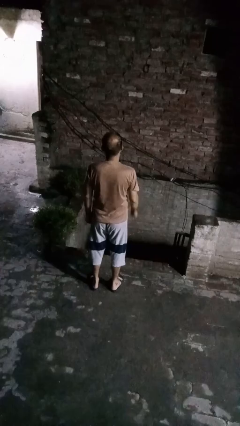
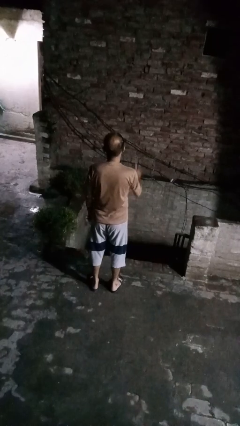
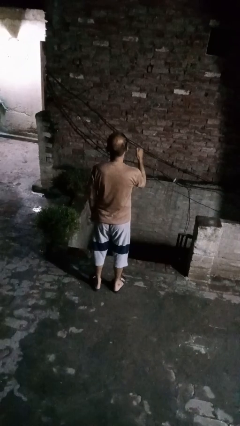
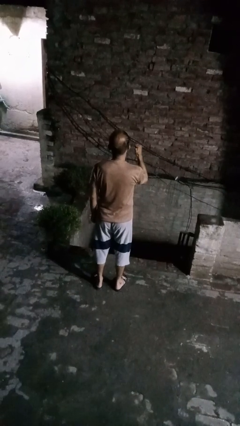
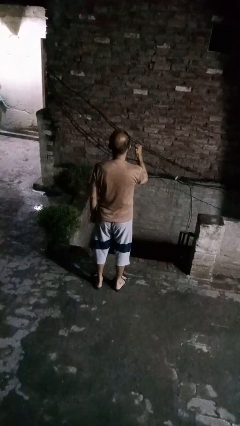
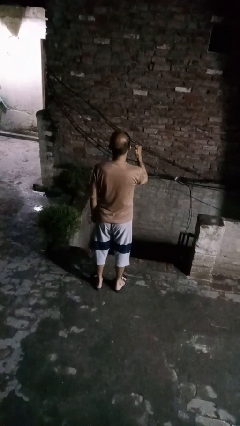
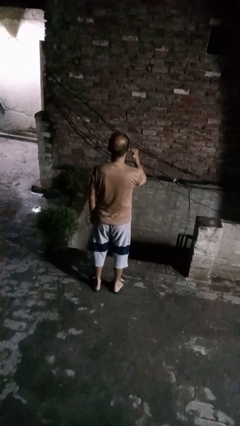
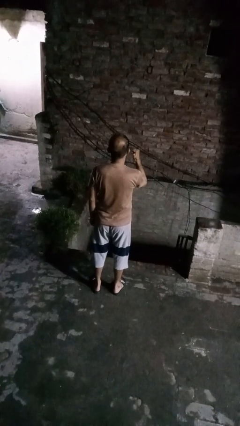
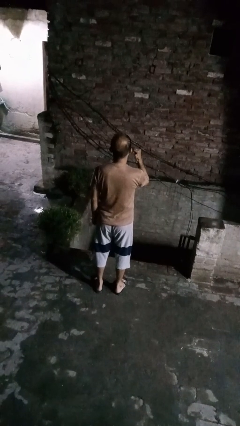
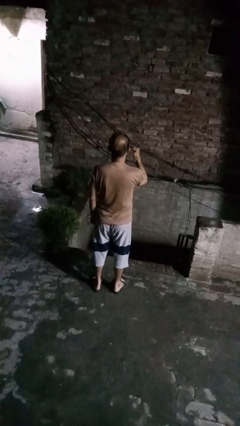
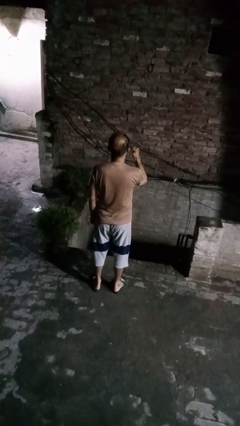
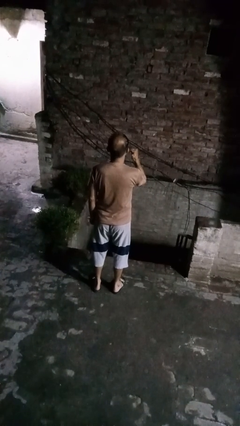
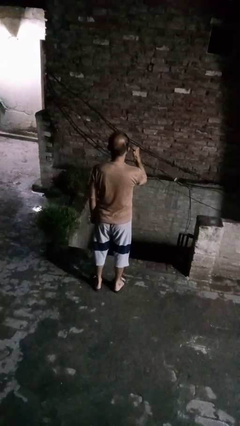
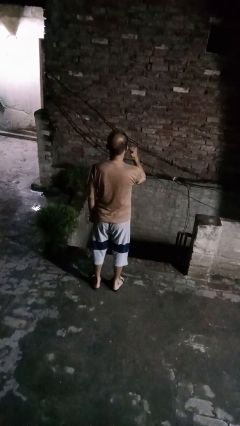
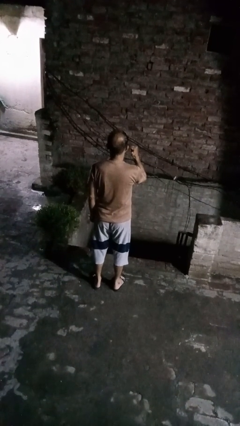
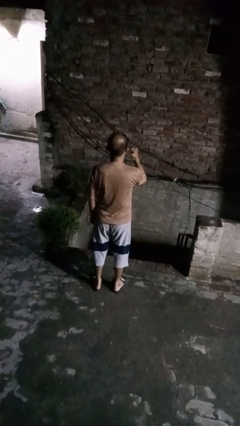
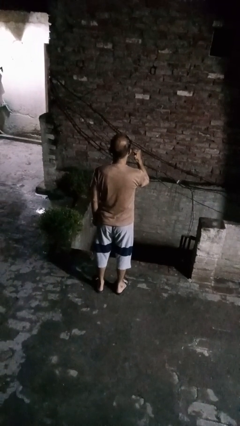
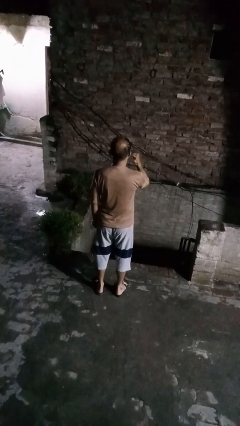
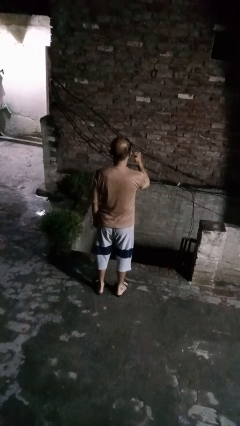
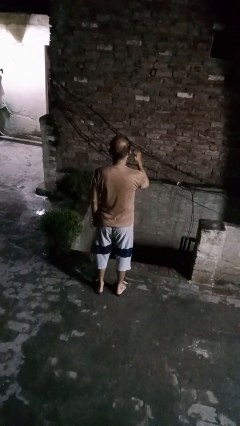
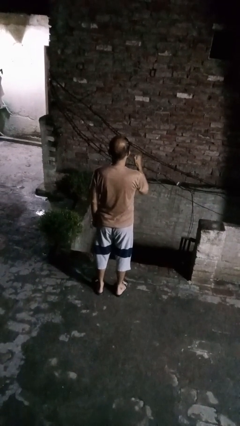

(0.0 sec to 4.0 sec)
person gestures behind me

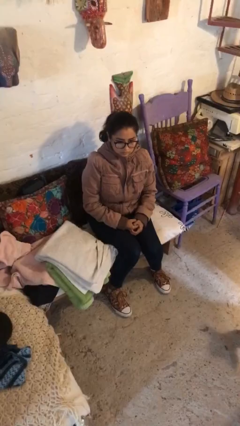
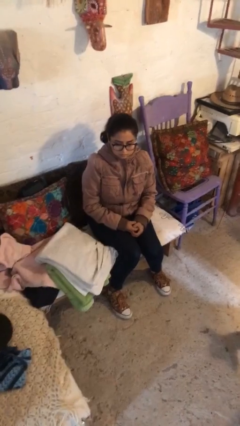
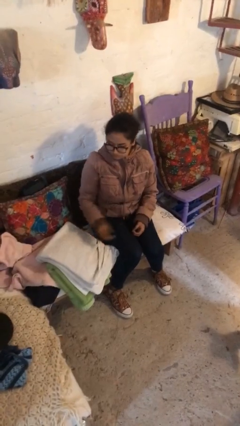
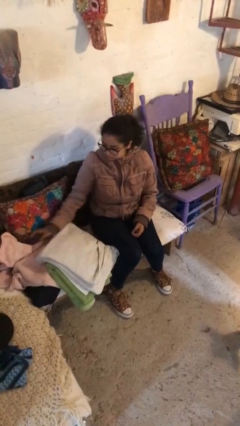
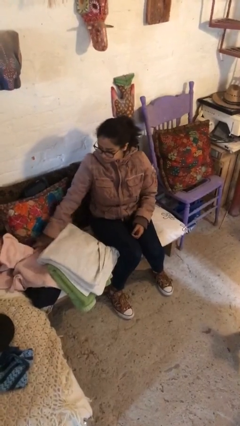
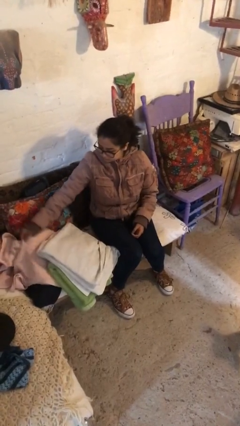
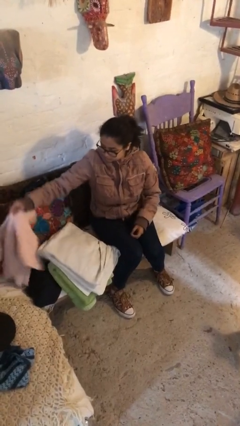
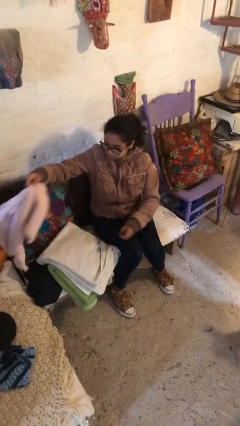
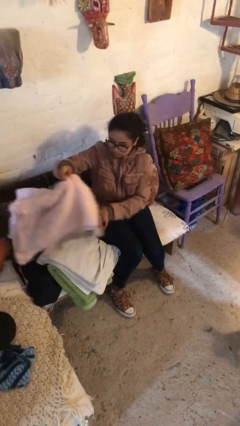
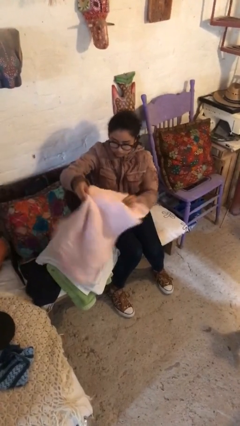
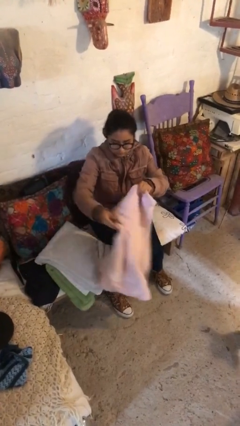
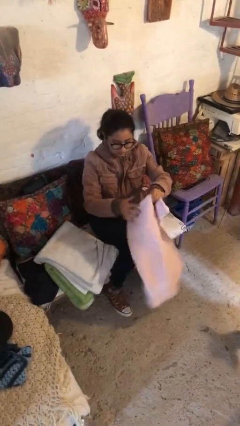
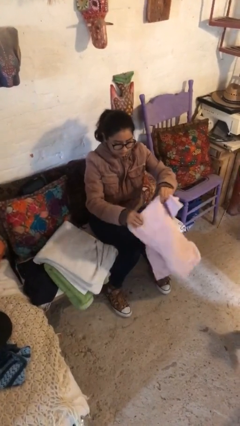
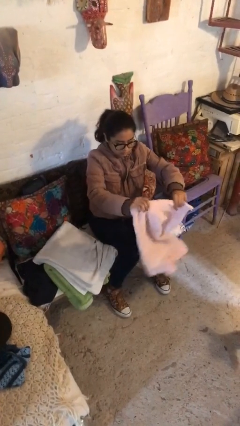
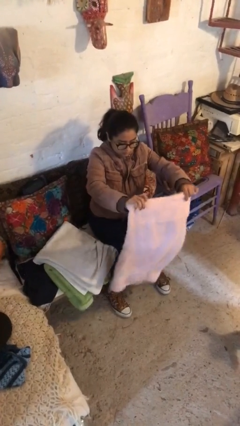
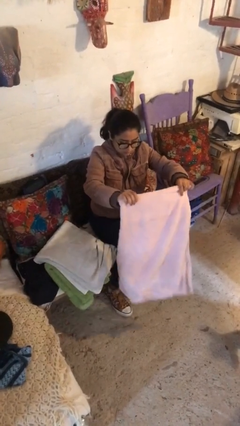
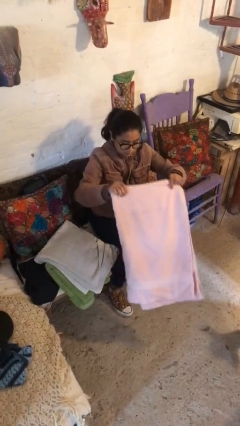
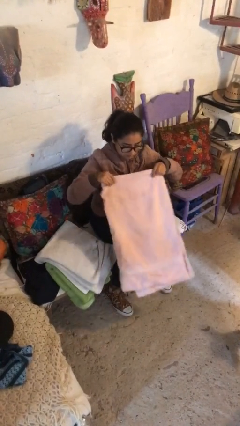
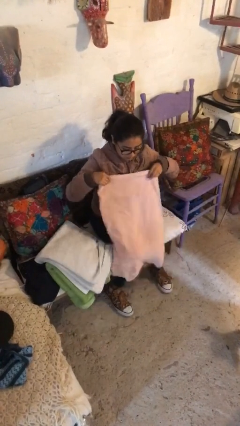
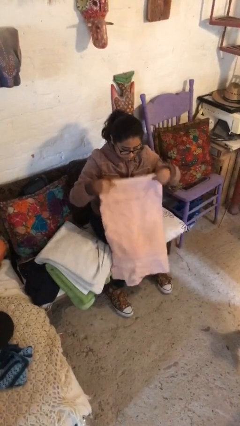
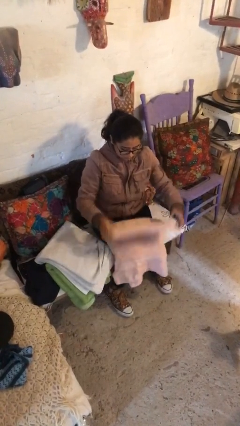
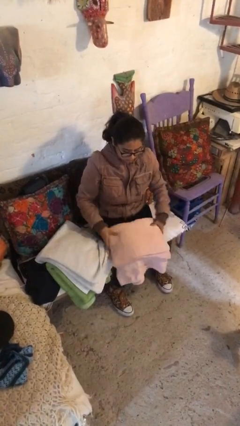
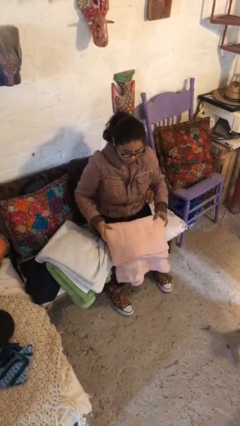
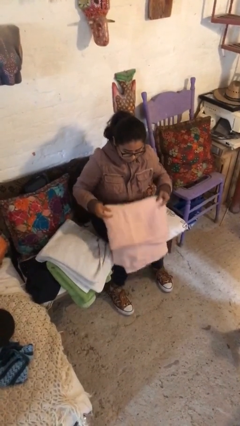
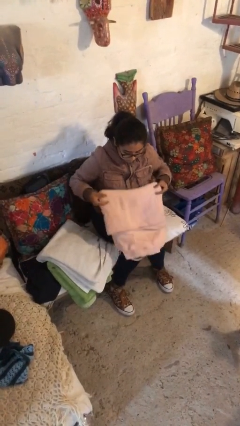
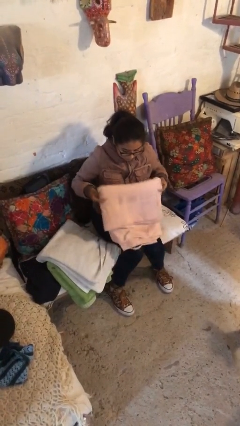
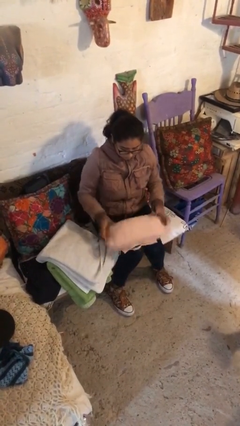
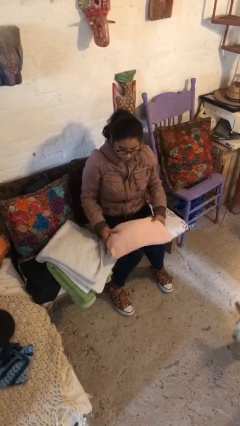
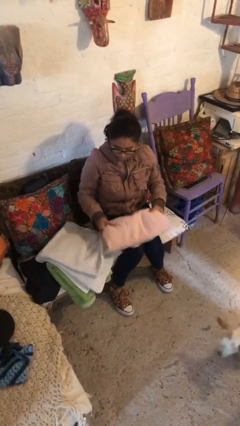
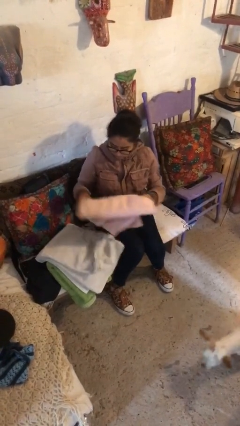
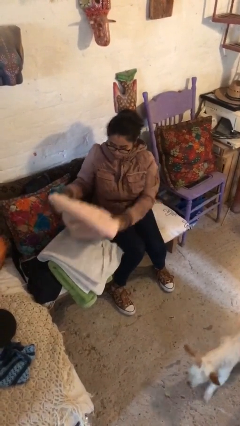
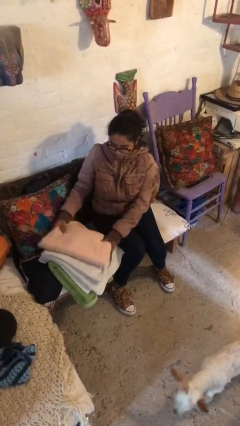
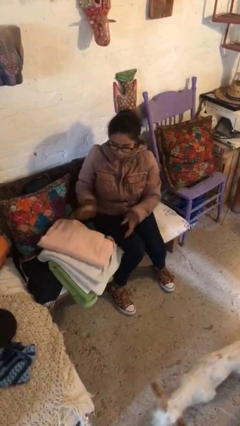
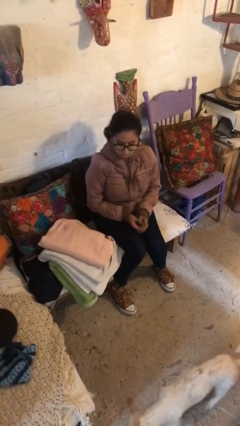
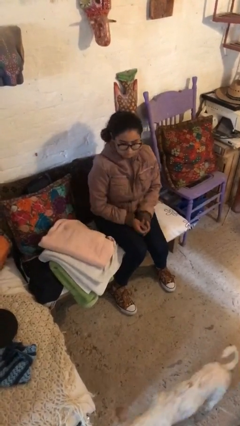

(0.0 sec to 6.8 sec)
person folds towel

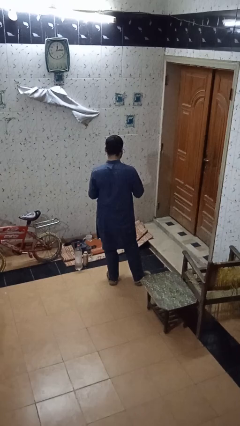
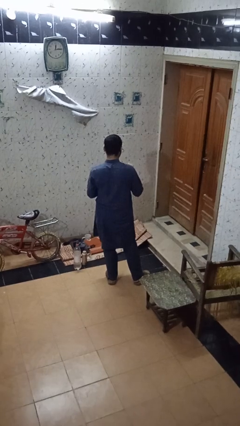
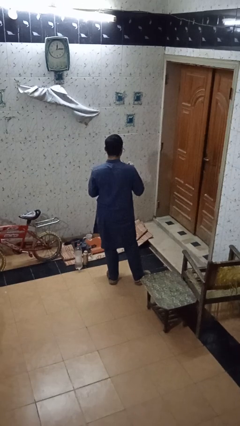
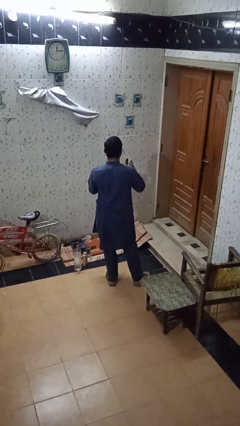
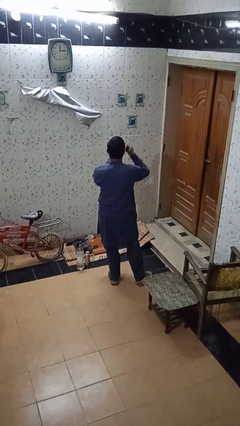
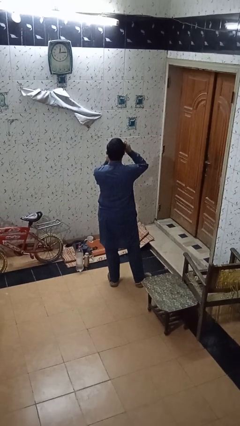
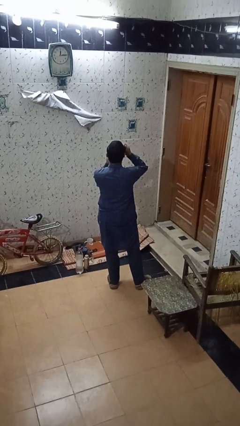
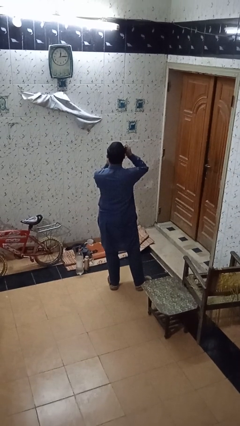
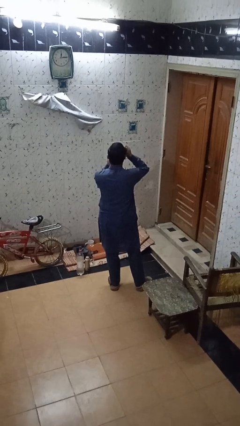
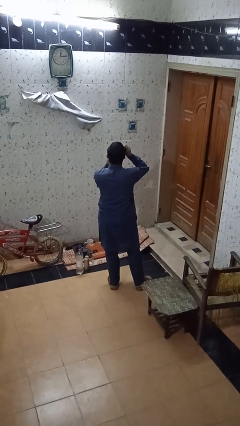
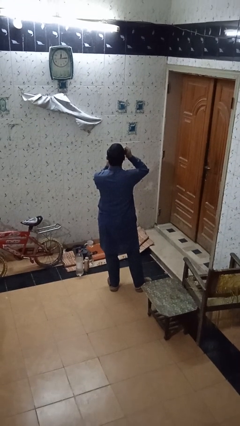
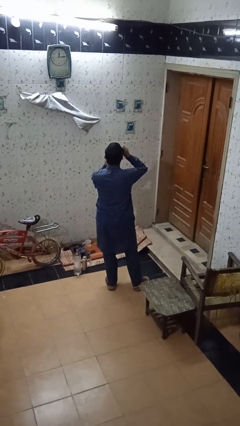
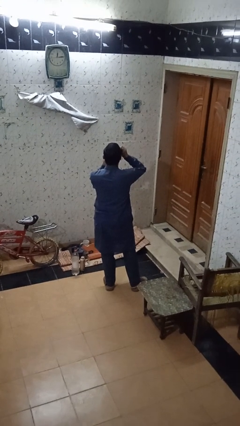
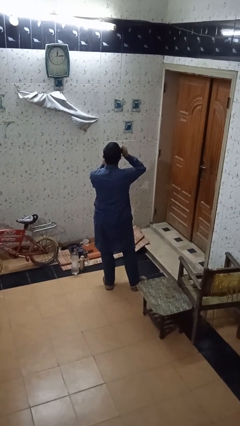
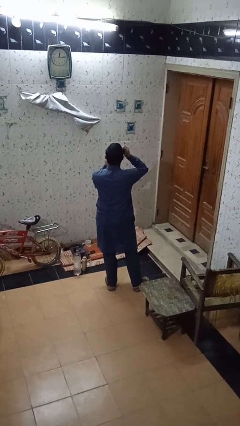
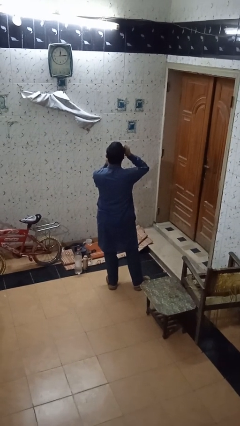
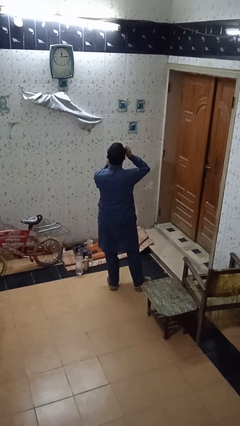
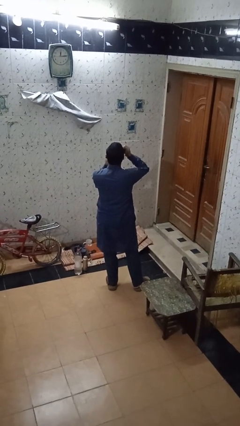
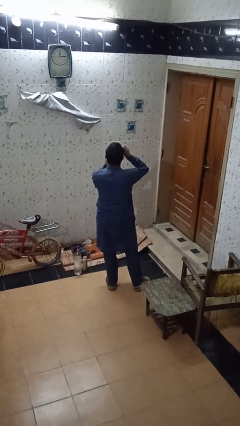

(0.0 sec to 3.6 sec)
person flosses

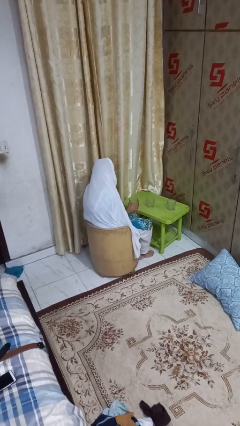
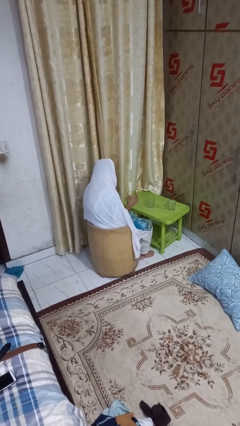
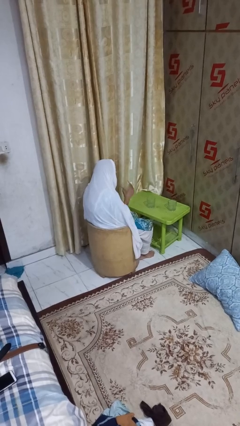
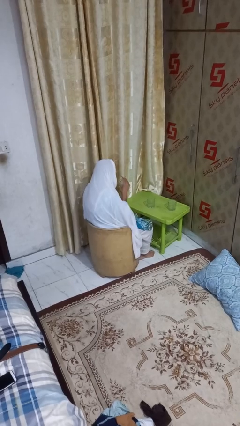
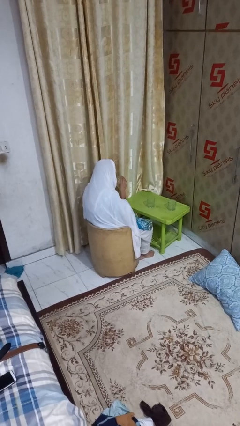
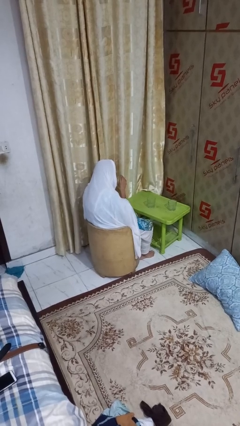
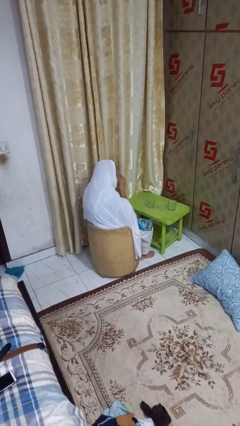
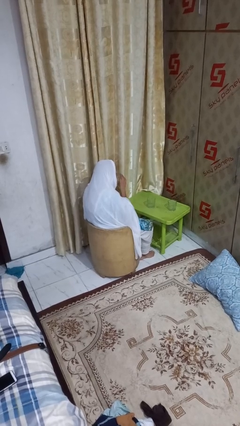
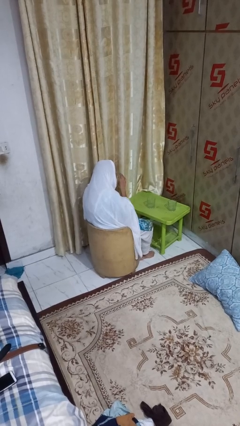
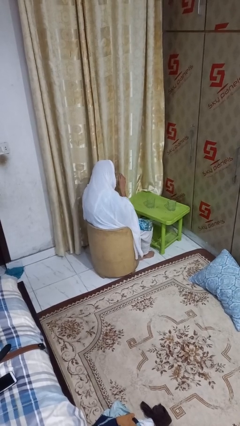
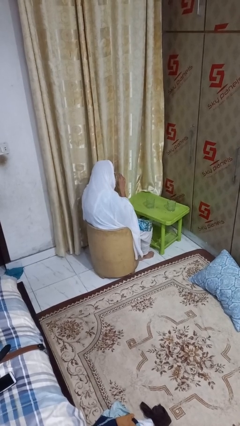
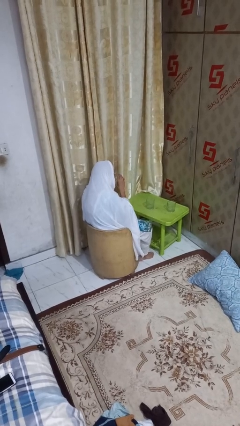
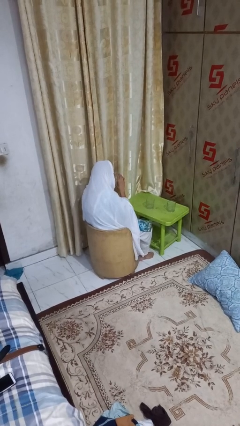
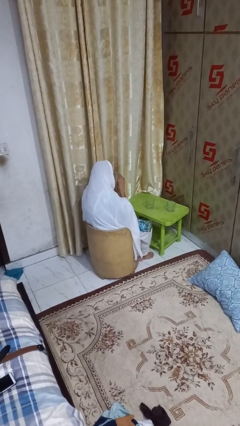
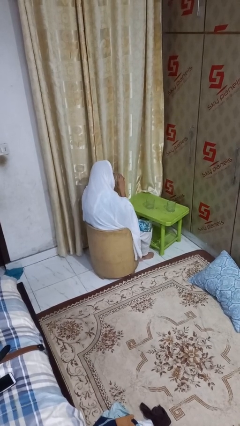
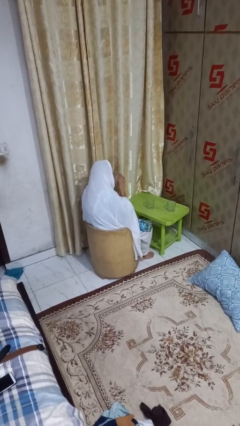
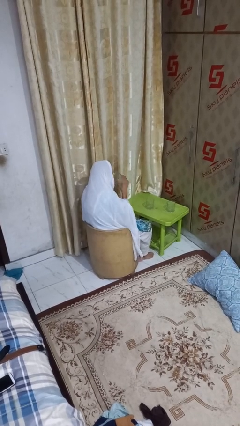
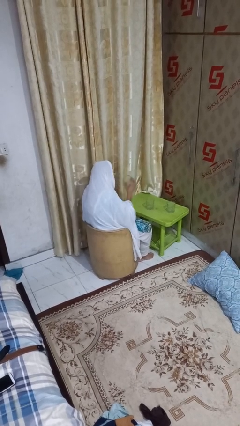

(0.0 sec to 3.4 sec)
person drinks from shotglass
